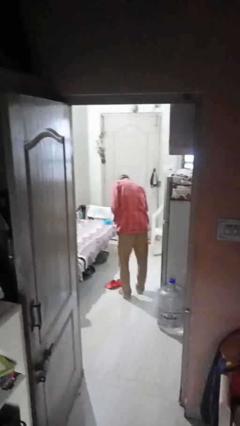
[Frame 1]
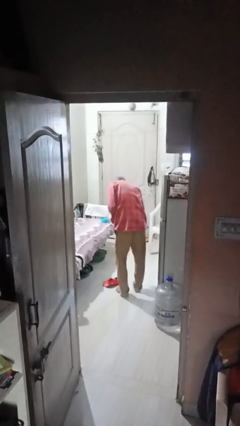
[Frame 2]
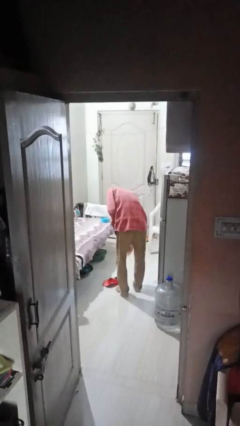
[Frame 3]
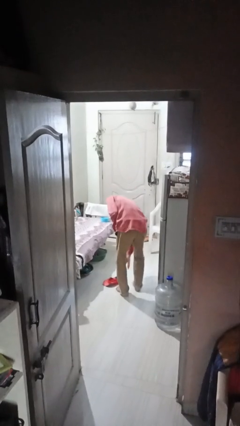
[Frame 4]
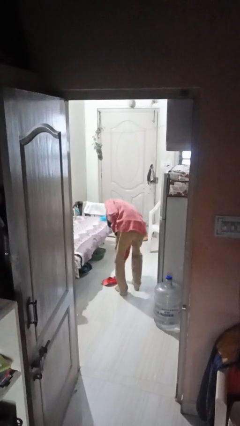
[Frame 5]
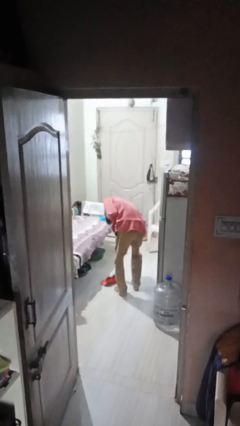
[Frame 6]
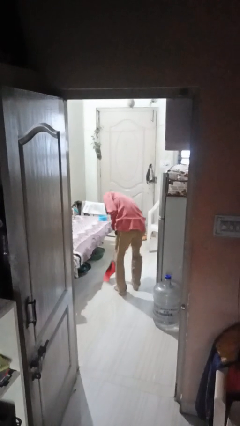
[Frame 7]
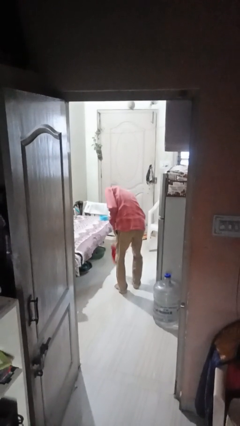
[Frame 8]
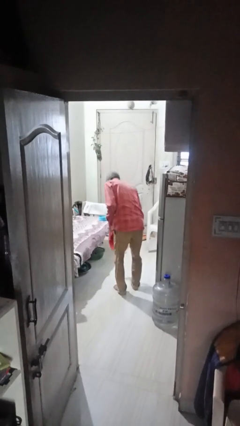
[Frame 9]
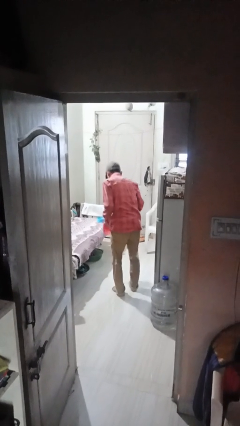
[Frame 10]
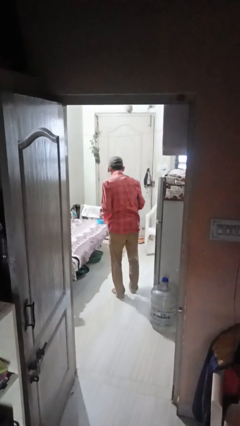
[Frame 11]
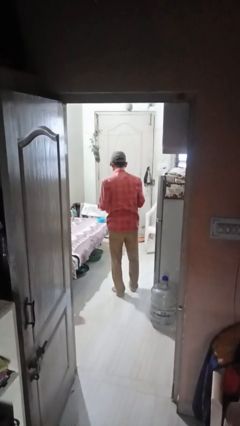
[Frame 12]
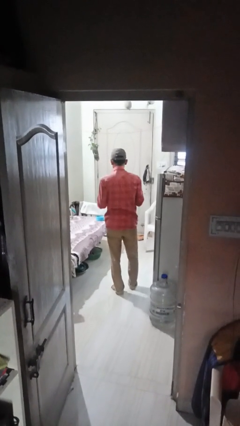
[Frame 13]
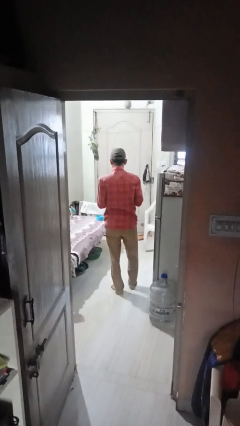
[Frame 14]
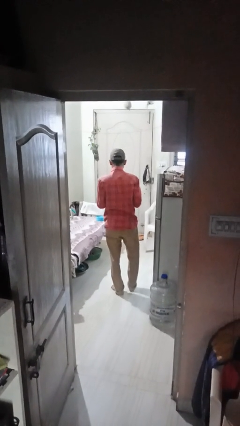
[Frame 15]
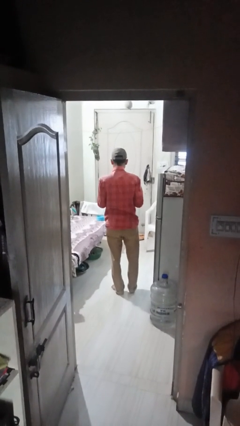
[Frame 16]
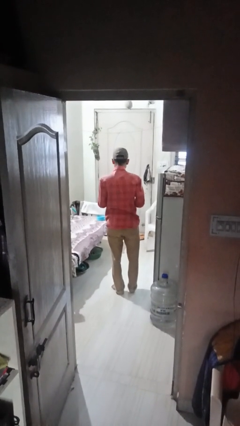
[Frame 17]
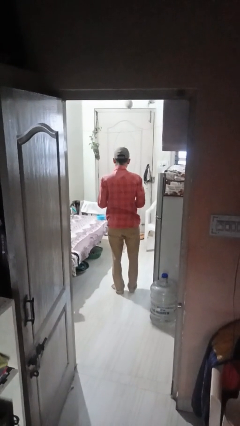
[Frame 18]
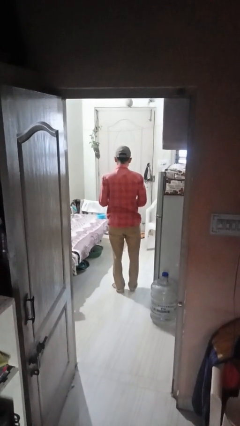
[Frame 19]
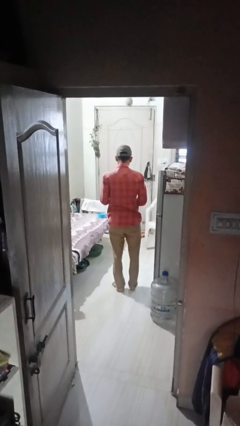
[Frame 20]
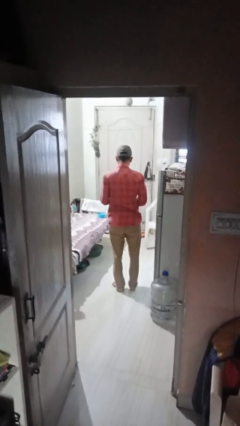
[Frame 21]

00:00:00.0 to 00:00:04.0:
person picks up object from floor

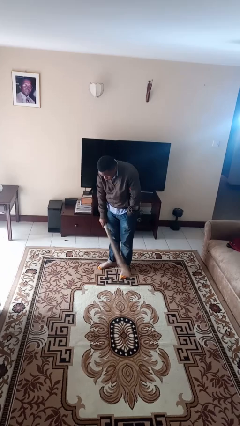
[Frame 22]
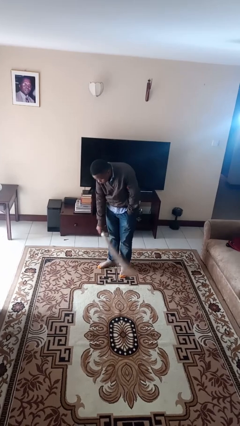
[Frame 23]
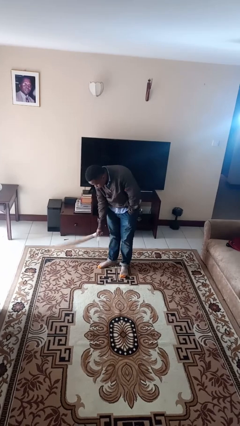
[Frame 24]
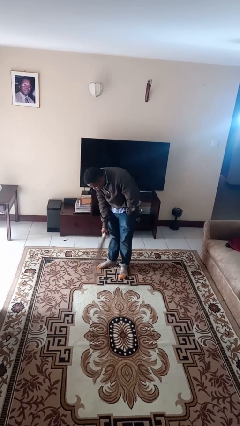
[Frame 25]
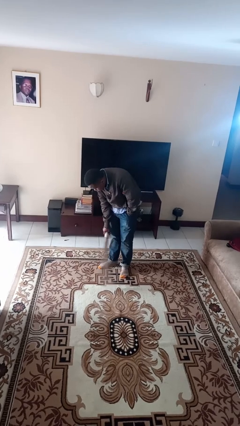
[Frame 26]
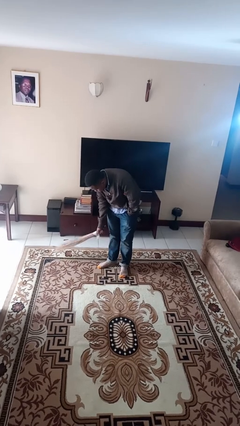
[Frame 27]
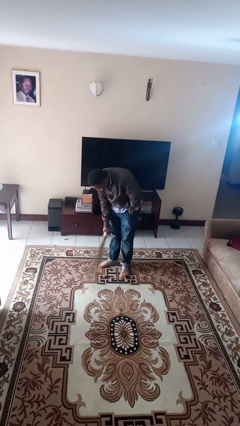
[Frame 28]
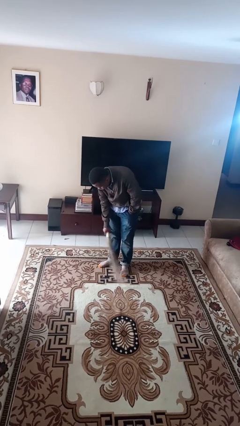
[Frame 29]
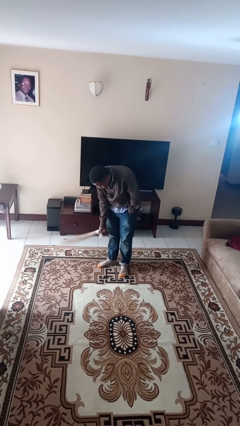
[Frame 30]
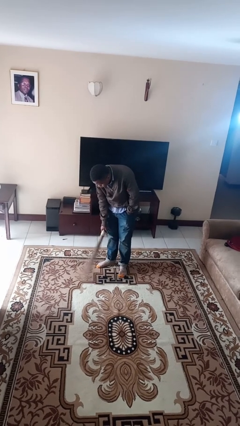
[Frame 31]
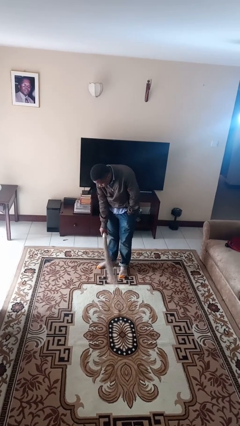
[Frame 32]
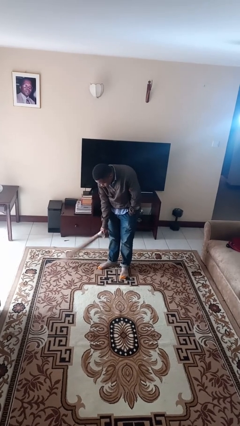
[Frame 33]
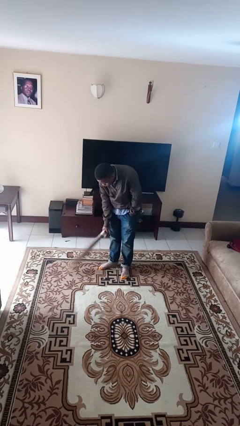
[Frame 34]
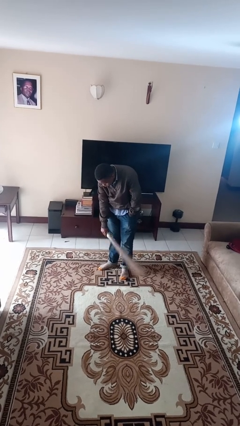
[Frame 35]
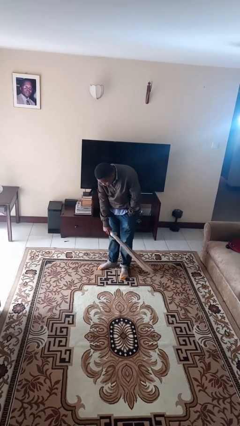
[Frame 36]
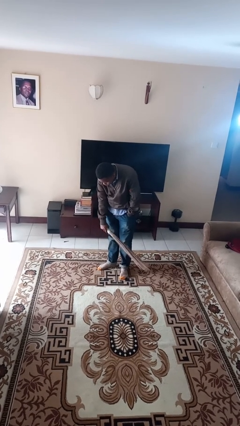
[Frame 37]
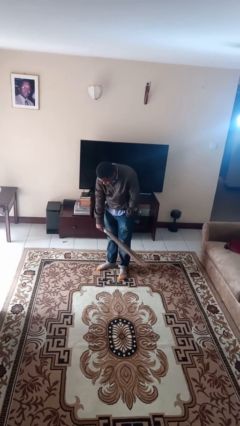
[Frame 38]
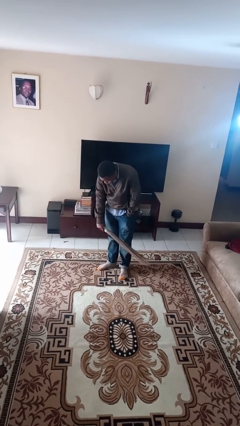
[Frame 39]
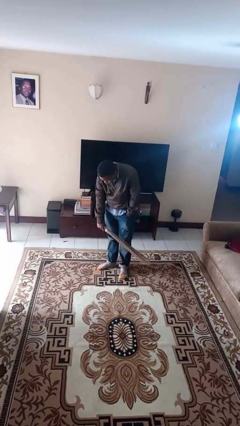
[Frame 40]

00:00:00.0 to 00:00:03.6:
person sweeps floor

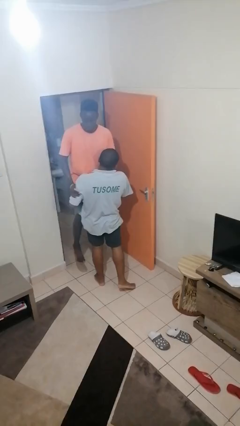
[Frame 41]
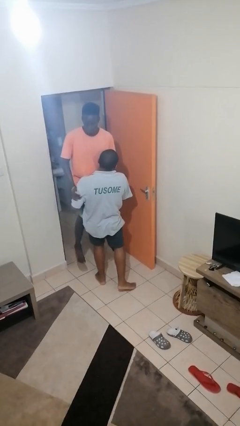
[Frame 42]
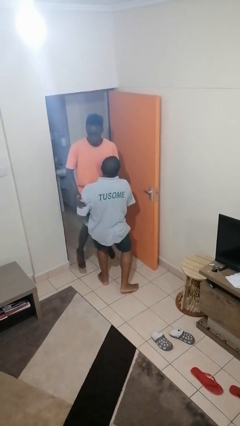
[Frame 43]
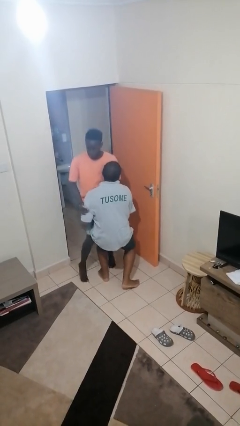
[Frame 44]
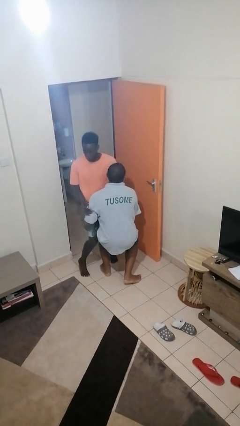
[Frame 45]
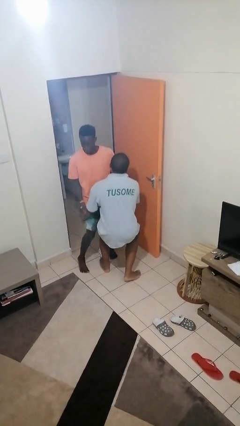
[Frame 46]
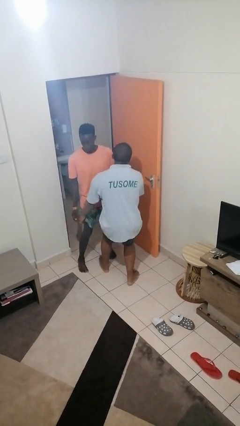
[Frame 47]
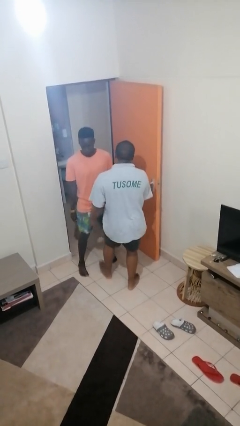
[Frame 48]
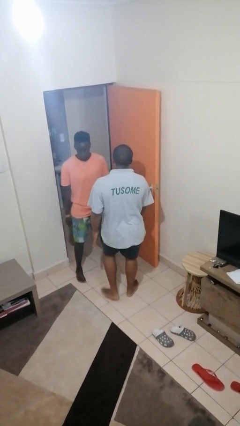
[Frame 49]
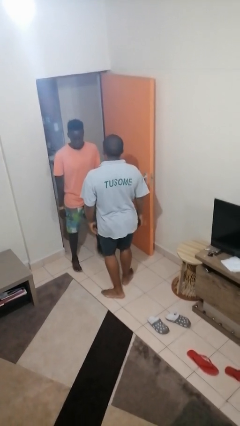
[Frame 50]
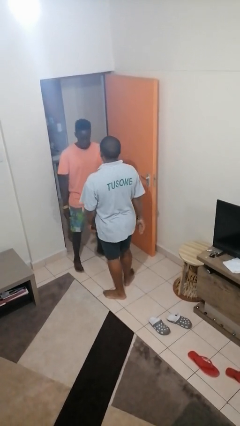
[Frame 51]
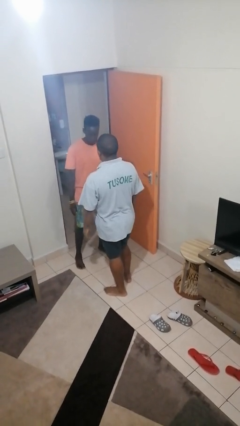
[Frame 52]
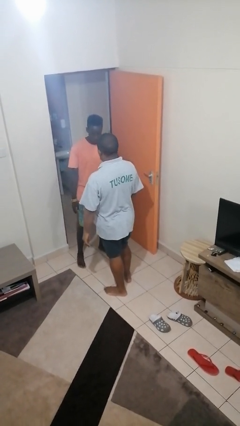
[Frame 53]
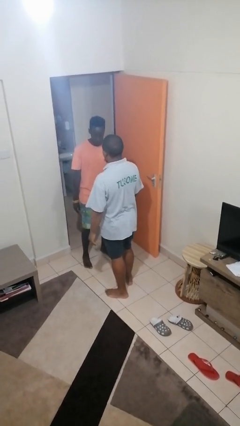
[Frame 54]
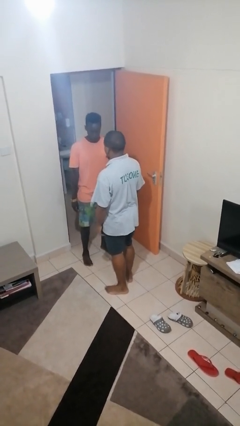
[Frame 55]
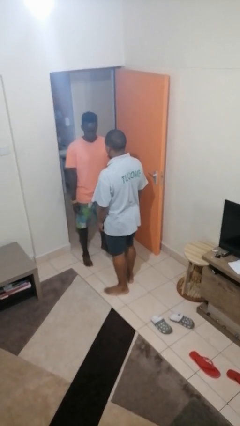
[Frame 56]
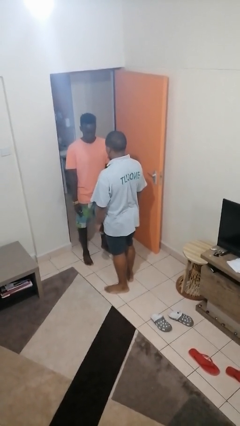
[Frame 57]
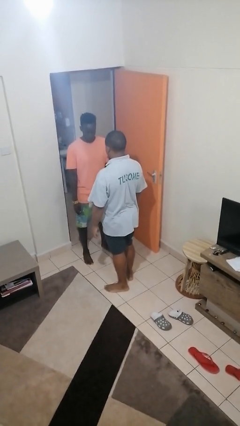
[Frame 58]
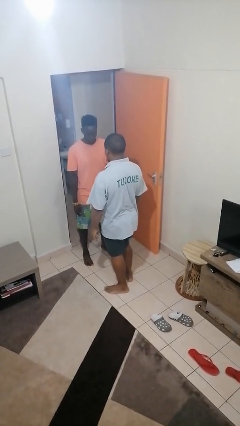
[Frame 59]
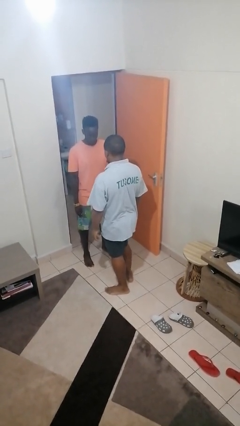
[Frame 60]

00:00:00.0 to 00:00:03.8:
person puts down person

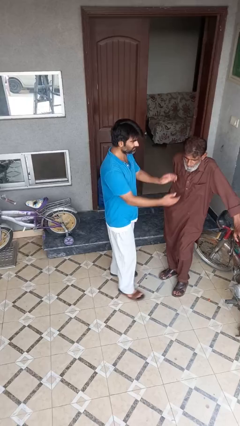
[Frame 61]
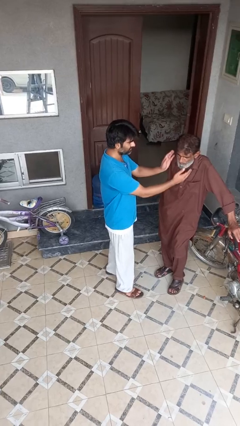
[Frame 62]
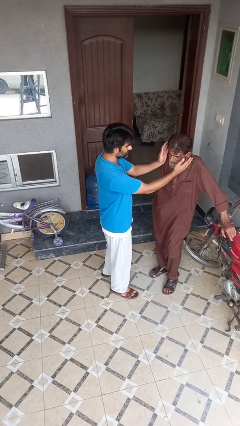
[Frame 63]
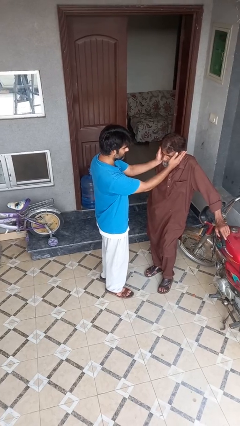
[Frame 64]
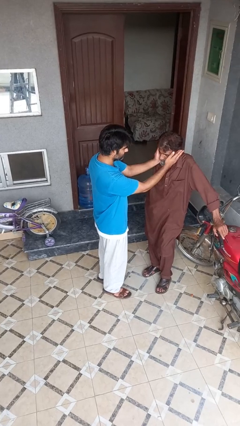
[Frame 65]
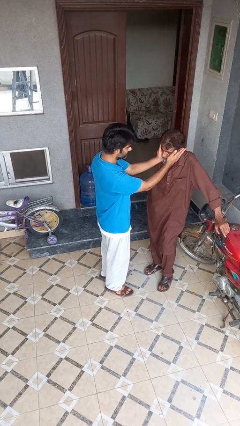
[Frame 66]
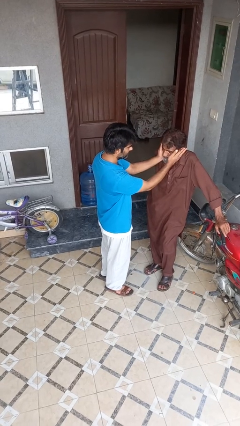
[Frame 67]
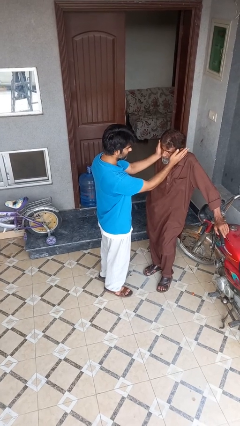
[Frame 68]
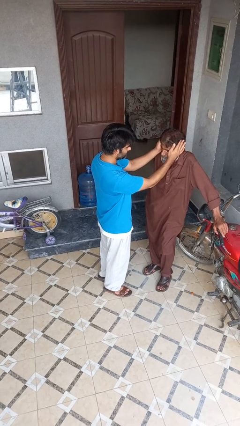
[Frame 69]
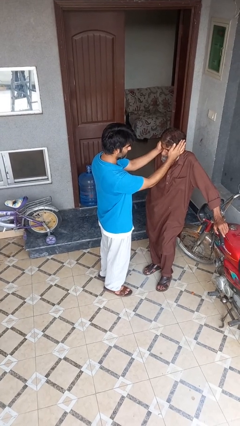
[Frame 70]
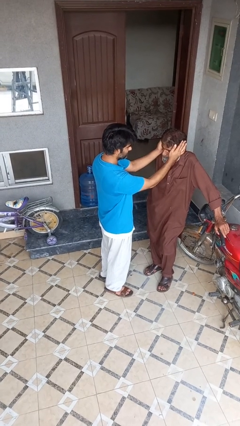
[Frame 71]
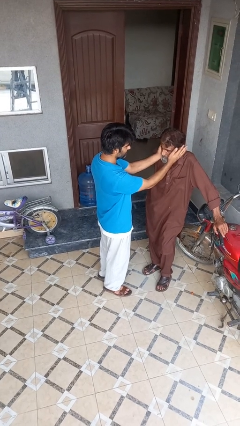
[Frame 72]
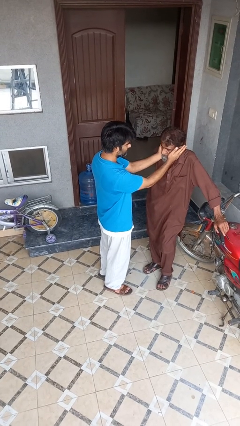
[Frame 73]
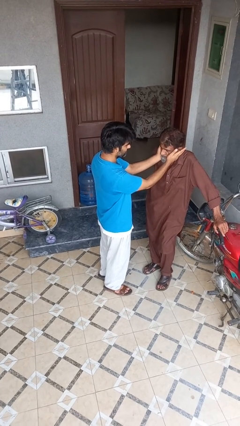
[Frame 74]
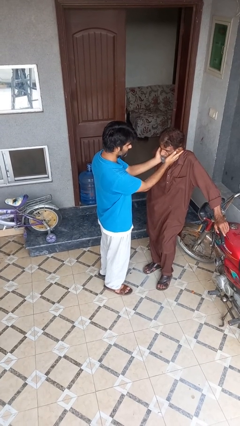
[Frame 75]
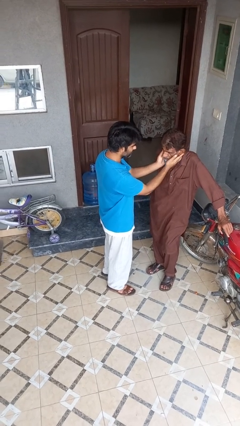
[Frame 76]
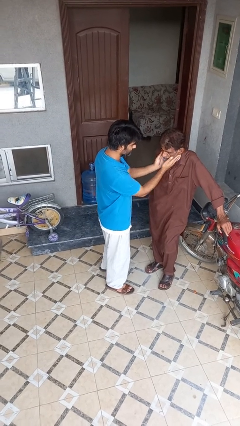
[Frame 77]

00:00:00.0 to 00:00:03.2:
person touches face of person

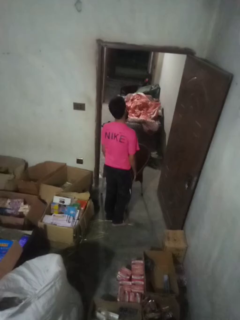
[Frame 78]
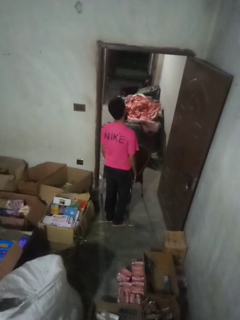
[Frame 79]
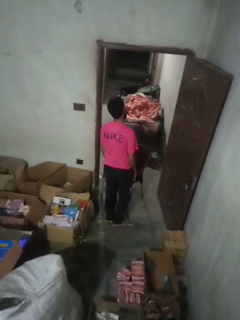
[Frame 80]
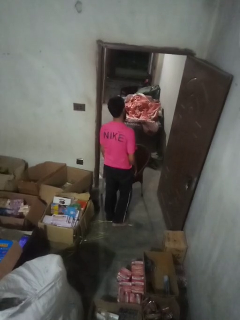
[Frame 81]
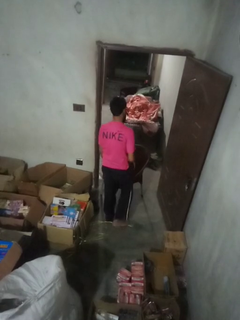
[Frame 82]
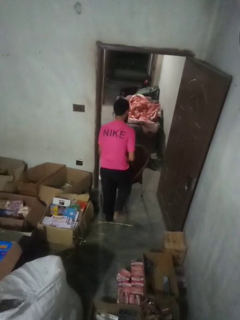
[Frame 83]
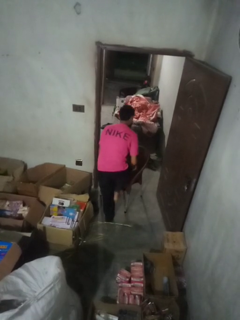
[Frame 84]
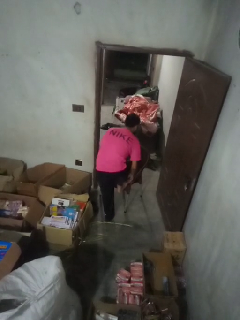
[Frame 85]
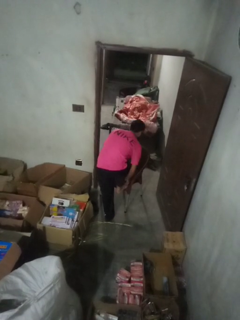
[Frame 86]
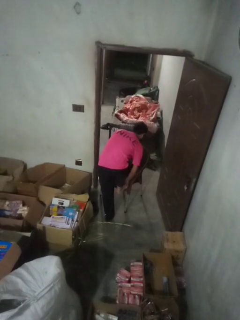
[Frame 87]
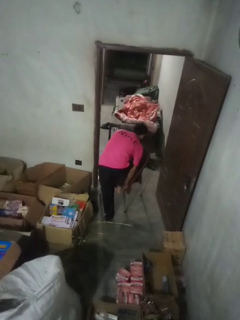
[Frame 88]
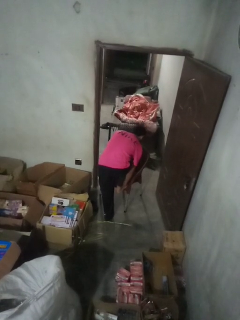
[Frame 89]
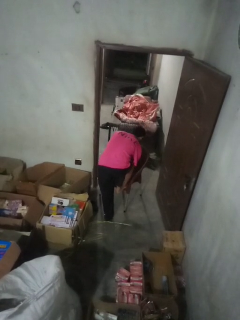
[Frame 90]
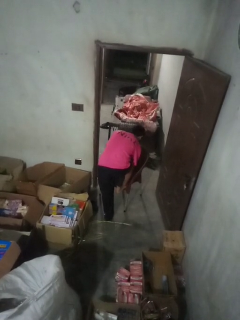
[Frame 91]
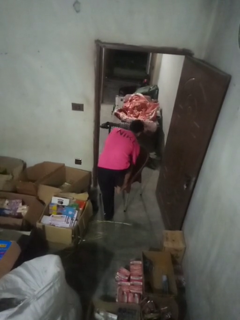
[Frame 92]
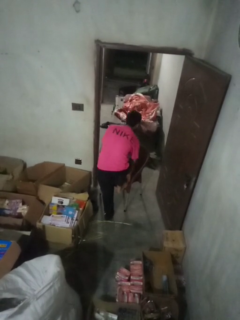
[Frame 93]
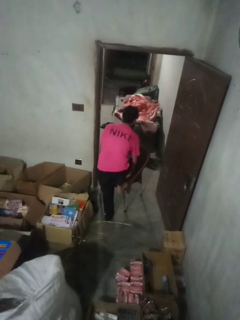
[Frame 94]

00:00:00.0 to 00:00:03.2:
person stubs toe

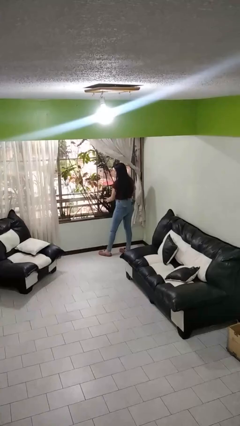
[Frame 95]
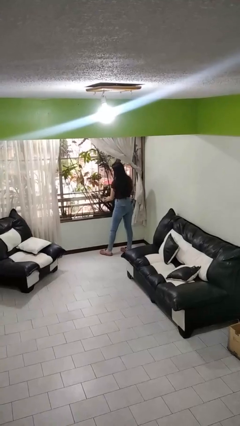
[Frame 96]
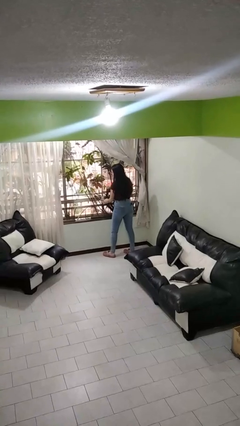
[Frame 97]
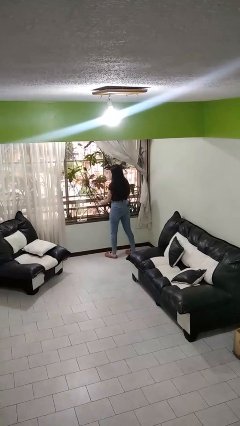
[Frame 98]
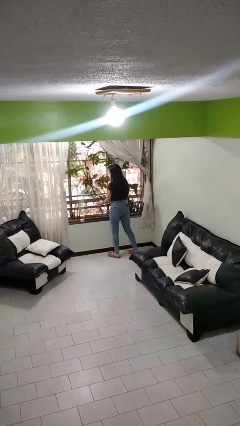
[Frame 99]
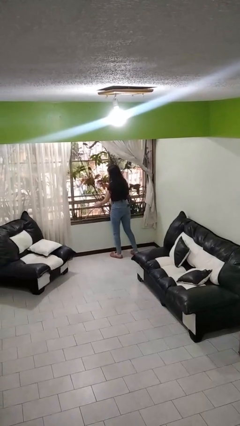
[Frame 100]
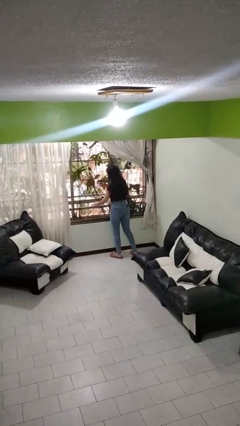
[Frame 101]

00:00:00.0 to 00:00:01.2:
person closes home window
